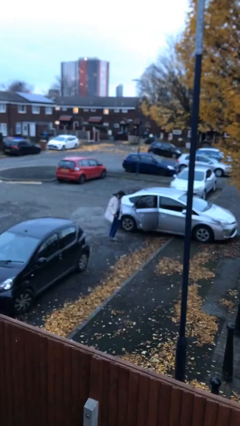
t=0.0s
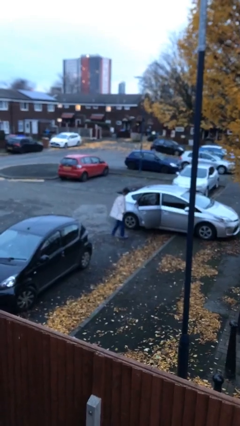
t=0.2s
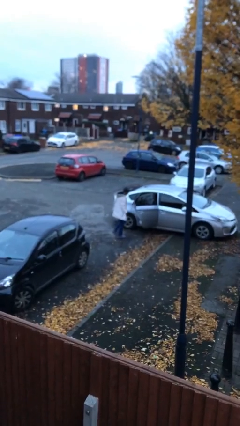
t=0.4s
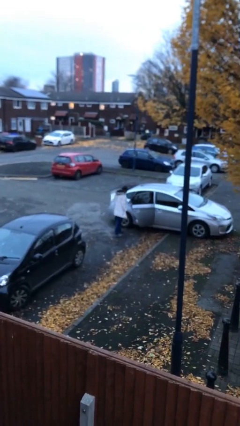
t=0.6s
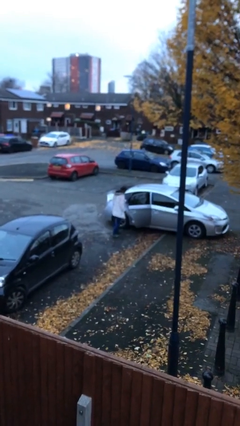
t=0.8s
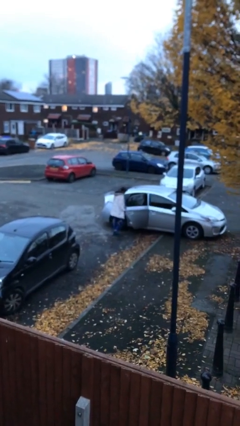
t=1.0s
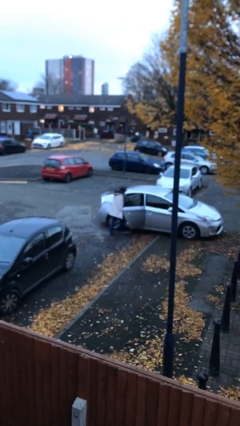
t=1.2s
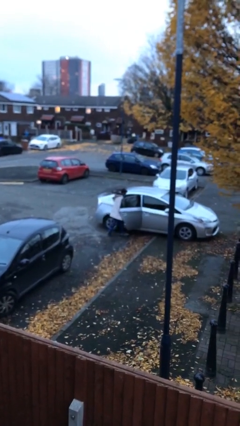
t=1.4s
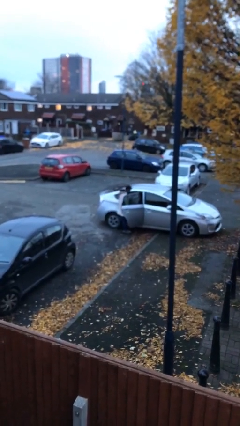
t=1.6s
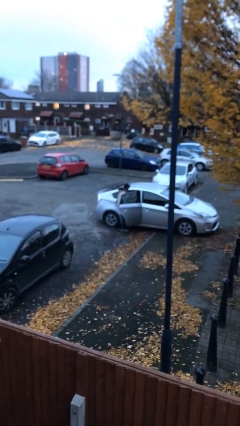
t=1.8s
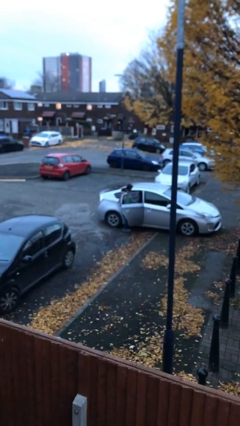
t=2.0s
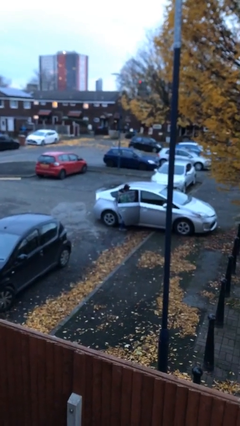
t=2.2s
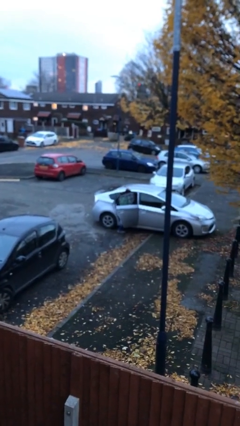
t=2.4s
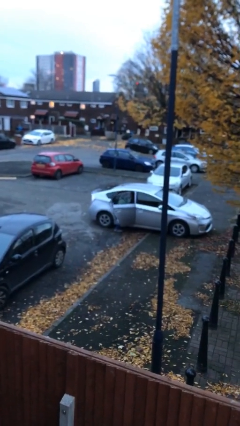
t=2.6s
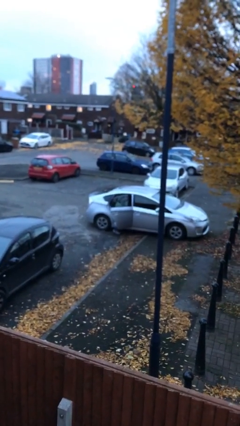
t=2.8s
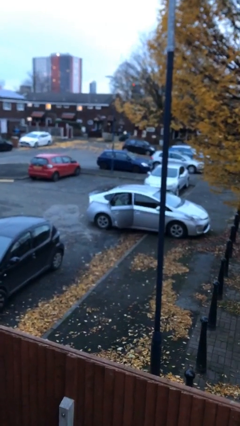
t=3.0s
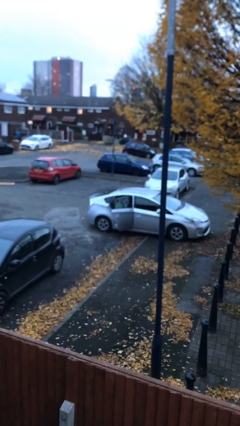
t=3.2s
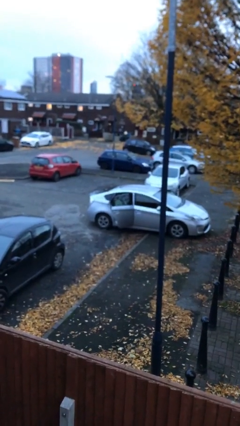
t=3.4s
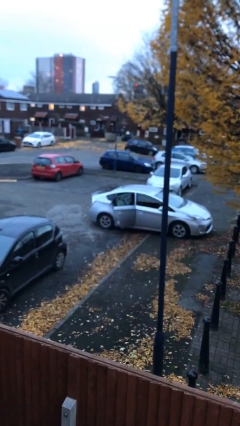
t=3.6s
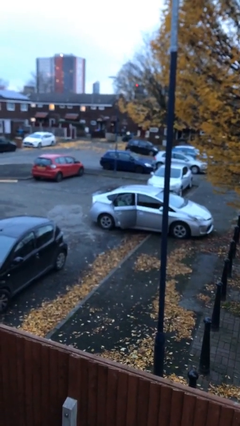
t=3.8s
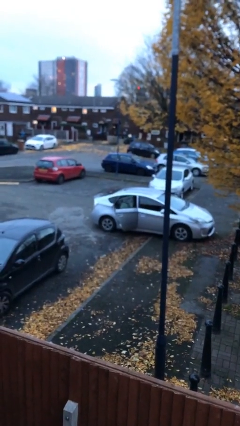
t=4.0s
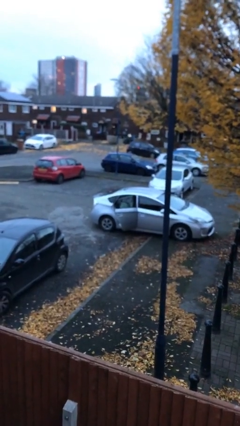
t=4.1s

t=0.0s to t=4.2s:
person enters car

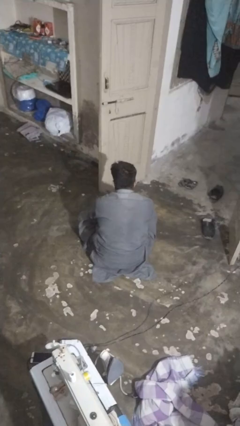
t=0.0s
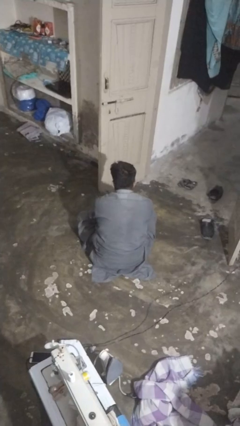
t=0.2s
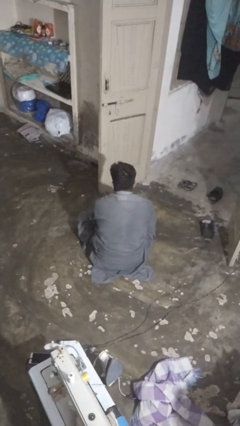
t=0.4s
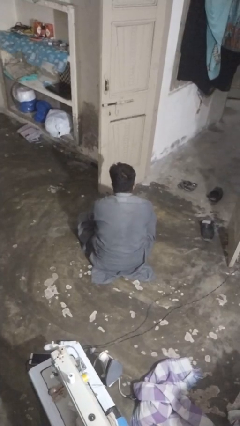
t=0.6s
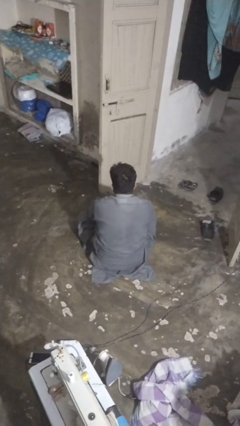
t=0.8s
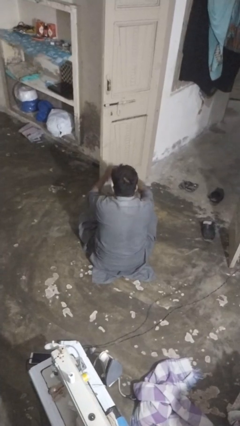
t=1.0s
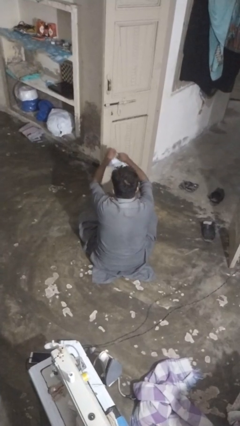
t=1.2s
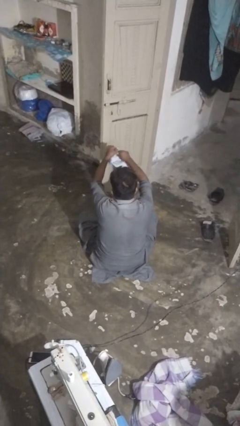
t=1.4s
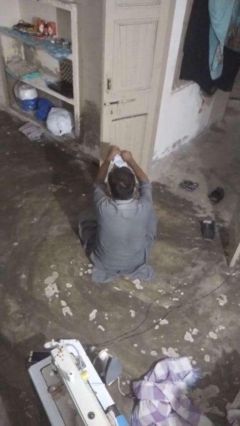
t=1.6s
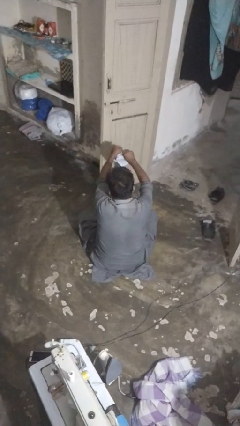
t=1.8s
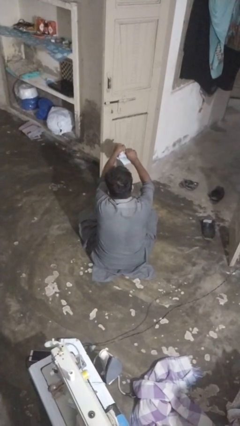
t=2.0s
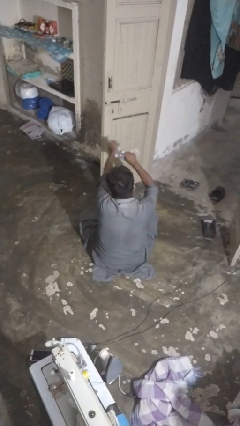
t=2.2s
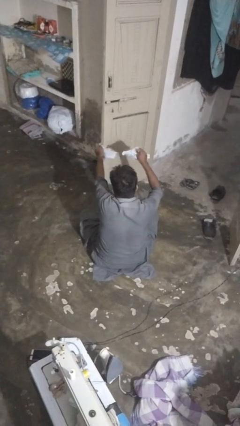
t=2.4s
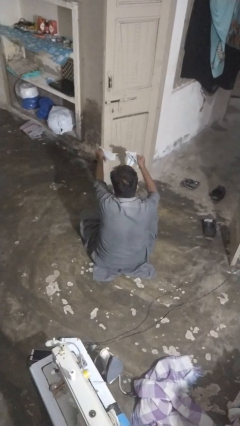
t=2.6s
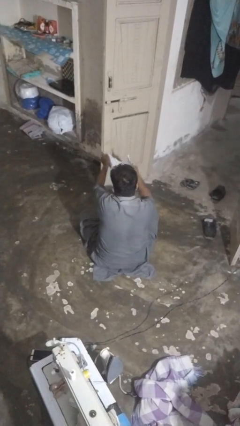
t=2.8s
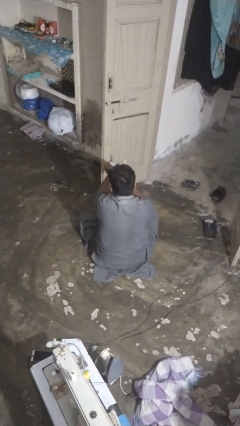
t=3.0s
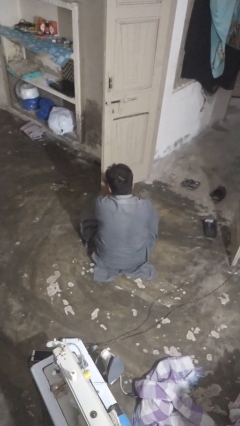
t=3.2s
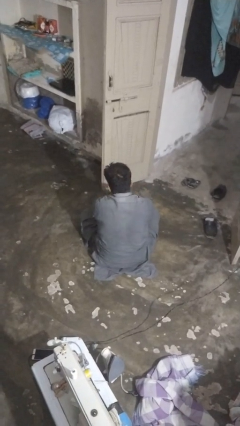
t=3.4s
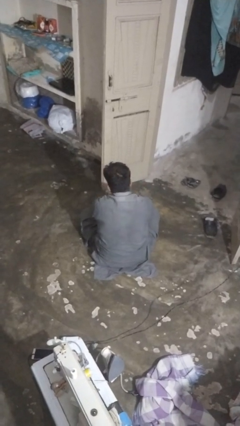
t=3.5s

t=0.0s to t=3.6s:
person tears paper

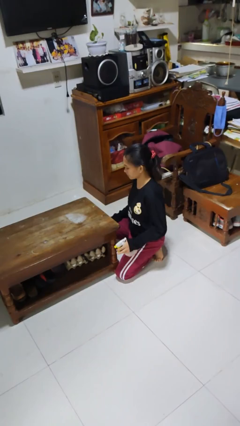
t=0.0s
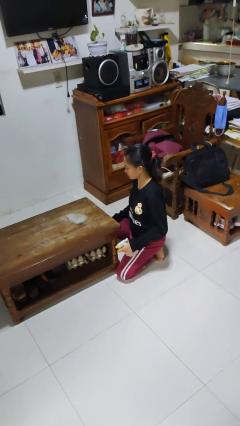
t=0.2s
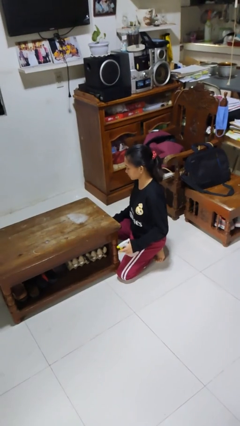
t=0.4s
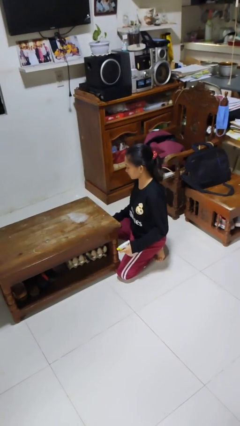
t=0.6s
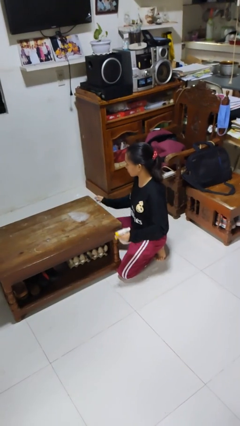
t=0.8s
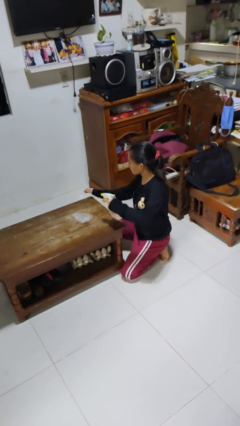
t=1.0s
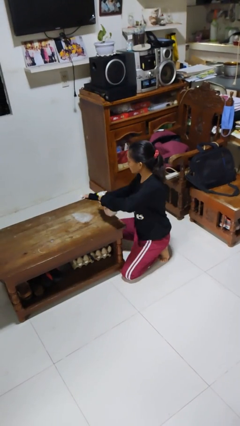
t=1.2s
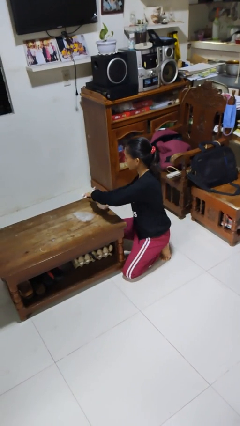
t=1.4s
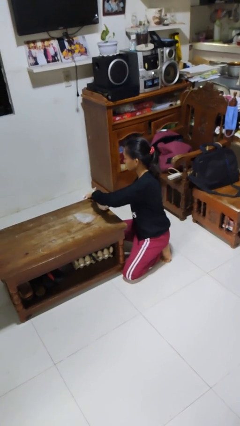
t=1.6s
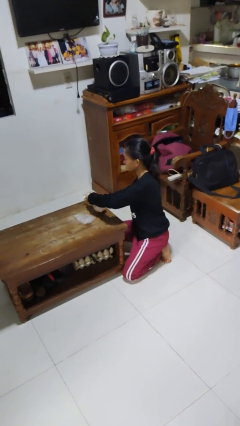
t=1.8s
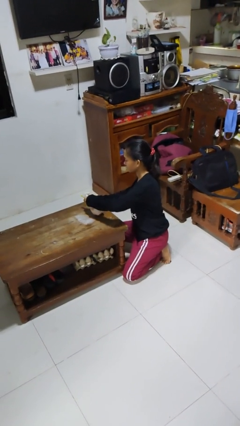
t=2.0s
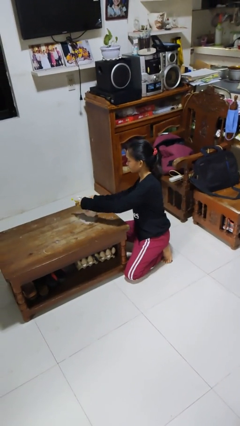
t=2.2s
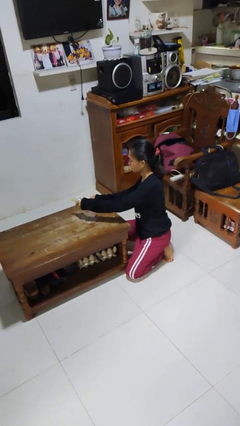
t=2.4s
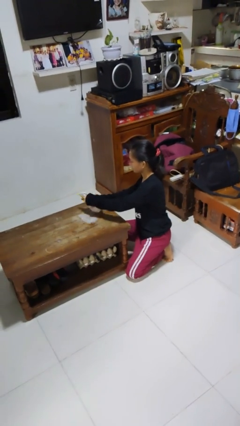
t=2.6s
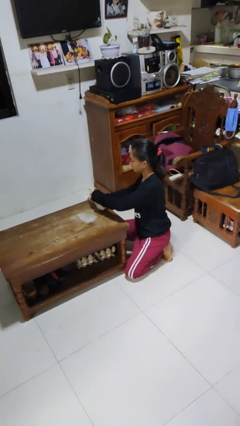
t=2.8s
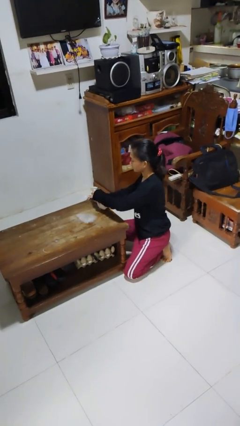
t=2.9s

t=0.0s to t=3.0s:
person sprays from bottle

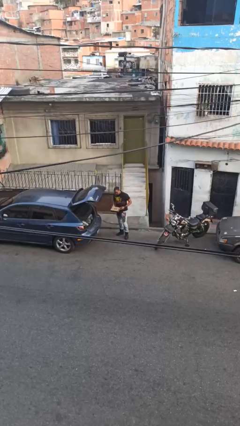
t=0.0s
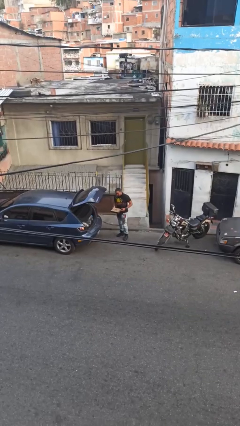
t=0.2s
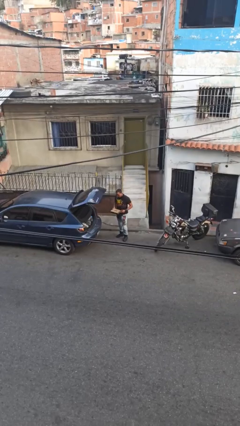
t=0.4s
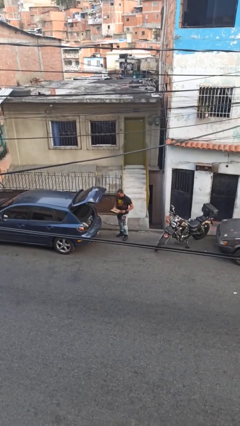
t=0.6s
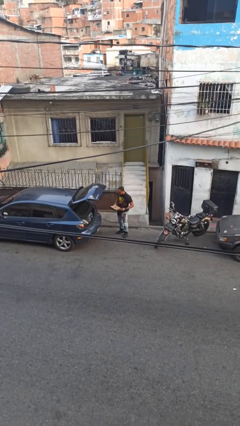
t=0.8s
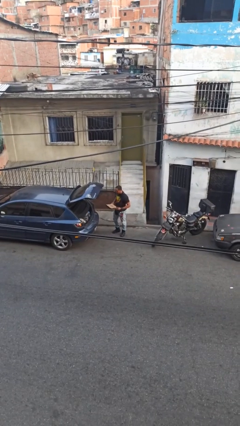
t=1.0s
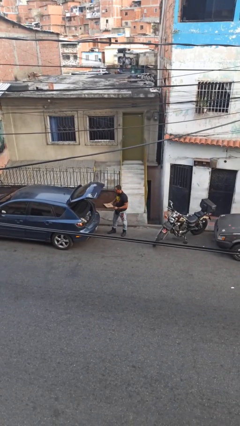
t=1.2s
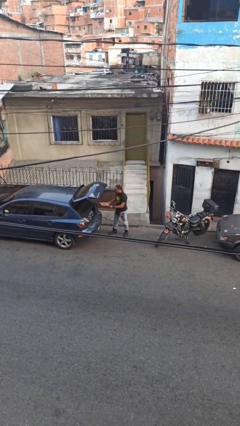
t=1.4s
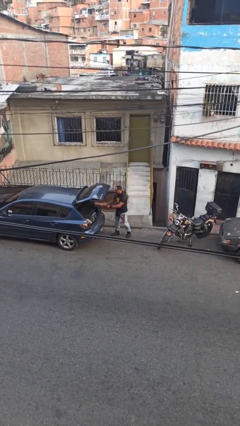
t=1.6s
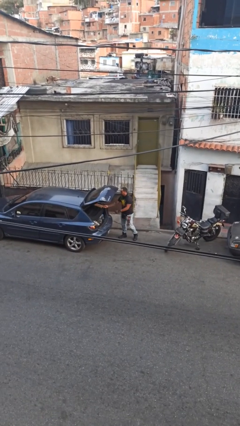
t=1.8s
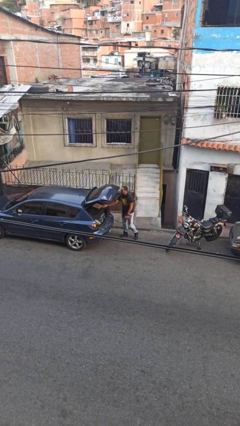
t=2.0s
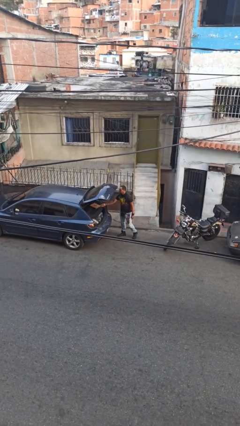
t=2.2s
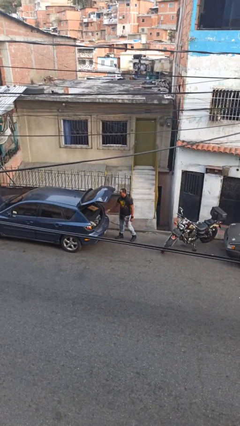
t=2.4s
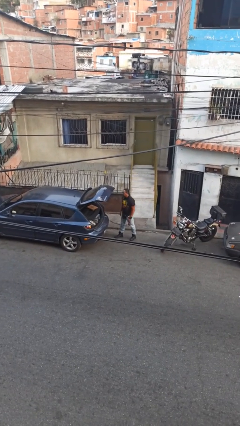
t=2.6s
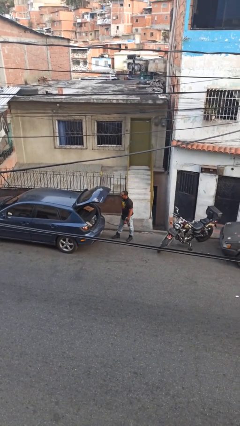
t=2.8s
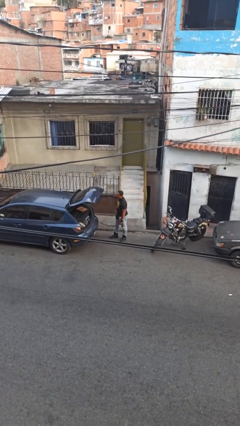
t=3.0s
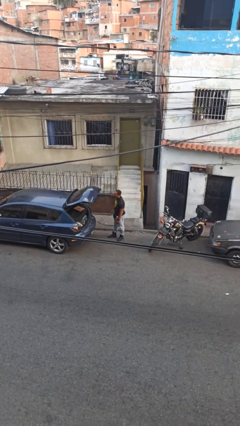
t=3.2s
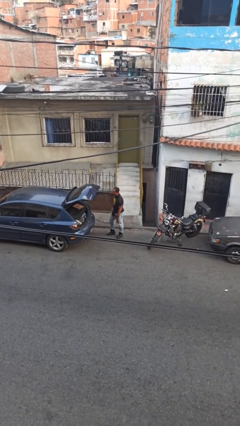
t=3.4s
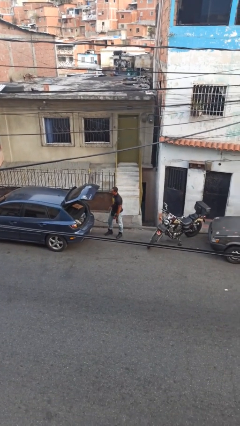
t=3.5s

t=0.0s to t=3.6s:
person loads car

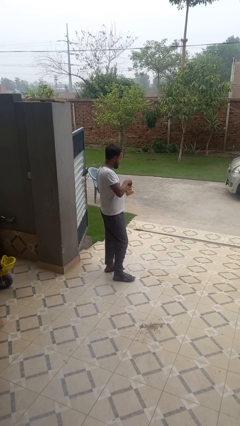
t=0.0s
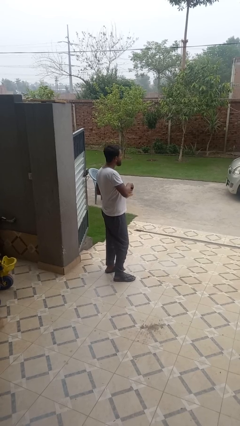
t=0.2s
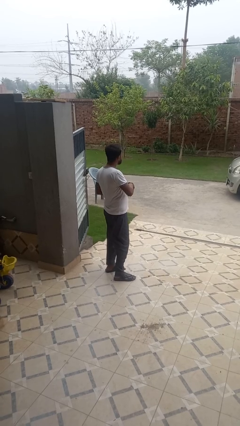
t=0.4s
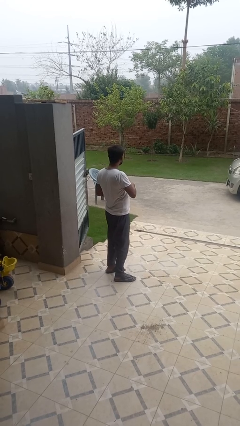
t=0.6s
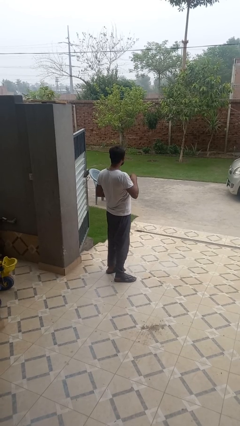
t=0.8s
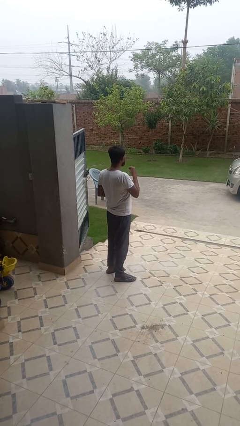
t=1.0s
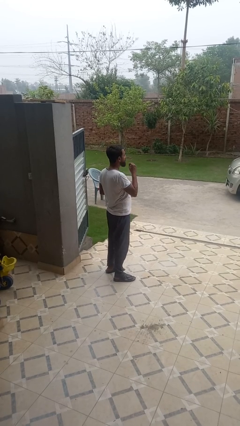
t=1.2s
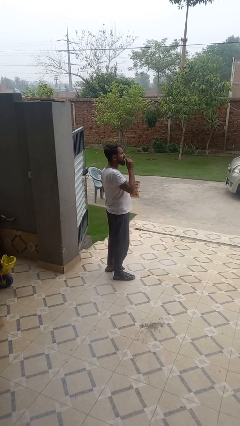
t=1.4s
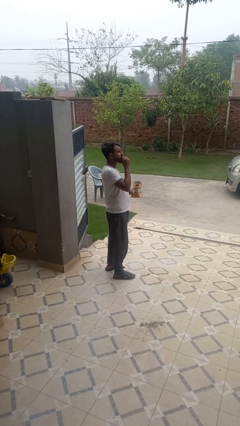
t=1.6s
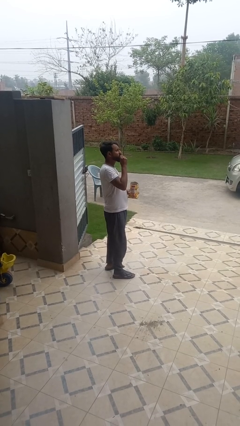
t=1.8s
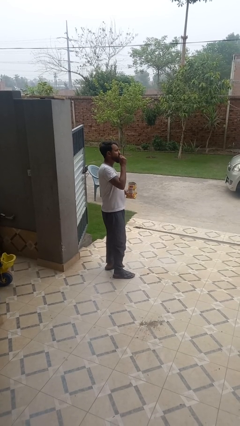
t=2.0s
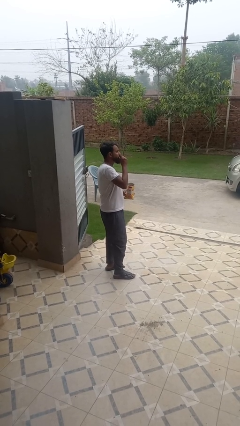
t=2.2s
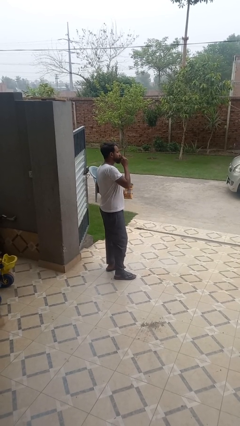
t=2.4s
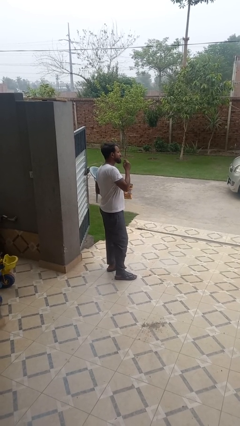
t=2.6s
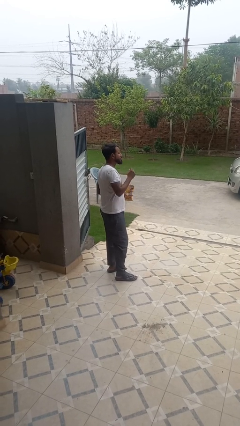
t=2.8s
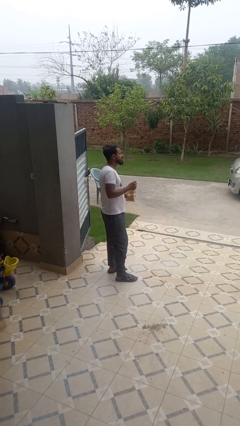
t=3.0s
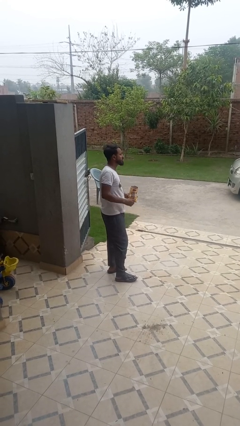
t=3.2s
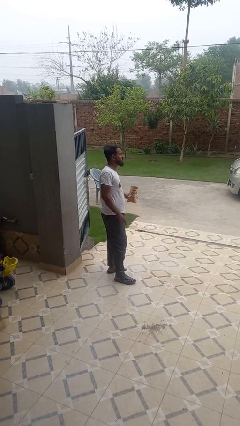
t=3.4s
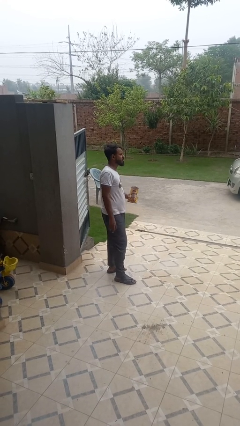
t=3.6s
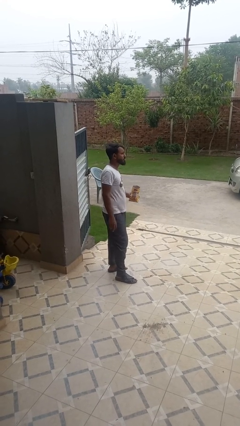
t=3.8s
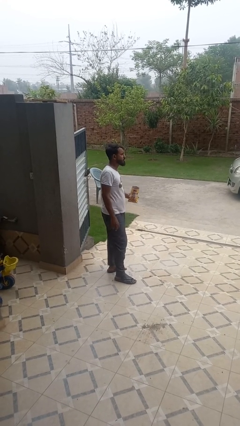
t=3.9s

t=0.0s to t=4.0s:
person eats snack from bag
